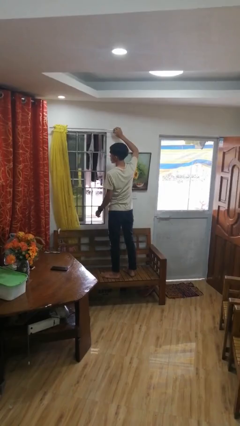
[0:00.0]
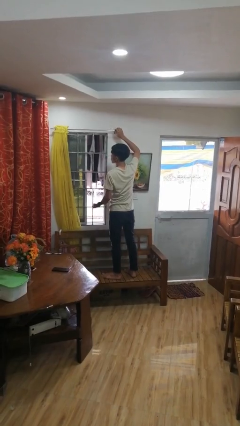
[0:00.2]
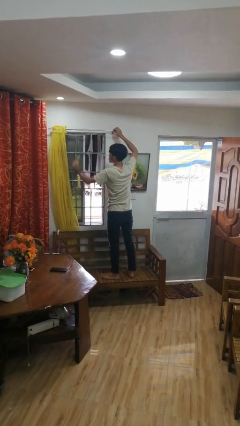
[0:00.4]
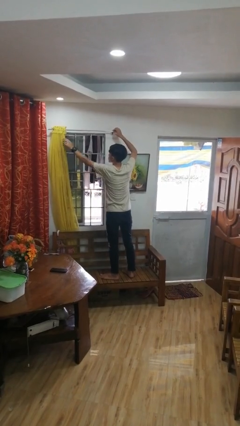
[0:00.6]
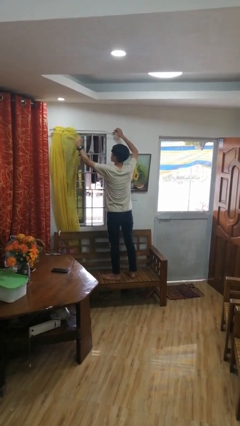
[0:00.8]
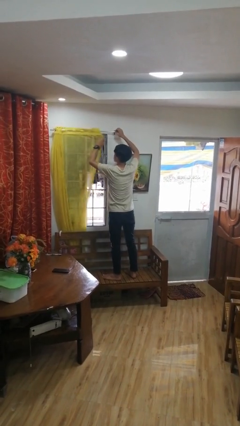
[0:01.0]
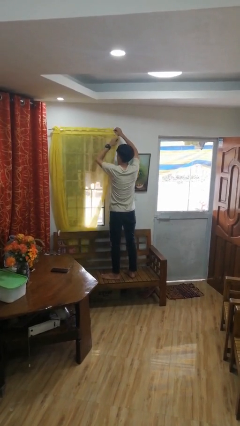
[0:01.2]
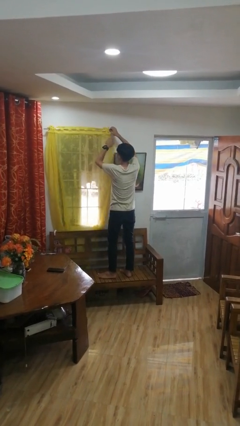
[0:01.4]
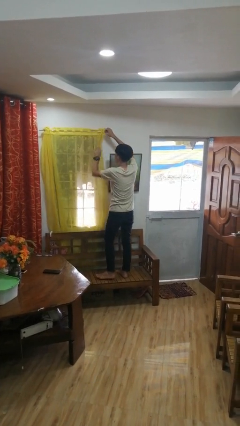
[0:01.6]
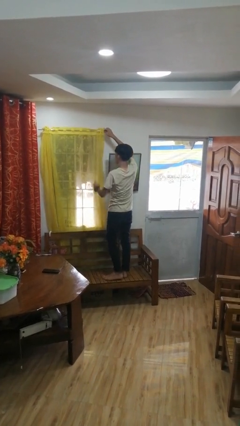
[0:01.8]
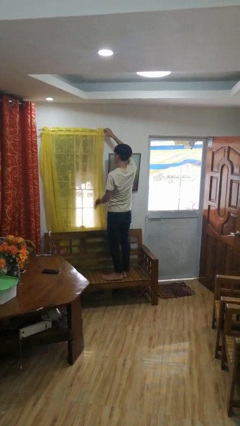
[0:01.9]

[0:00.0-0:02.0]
person closes curtains

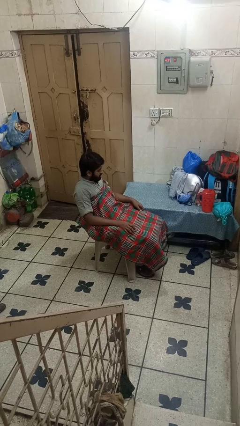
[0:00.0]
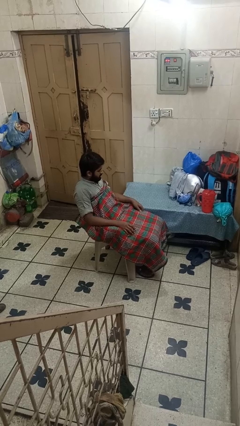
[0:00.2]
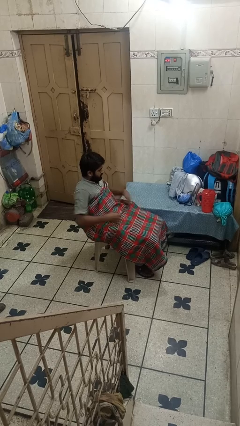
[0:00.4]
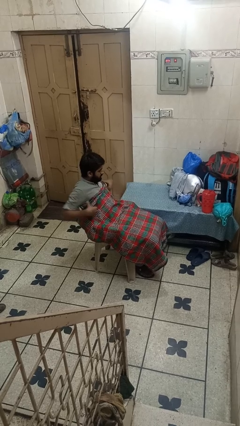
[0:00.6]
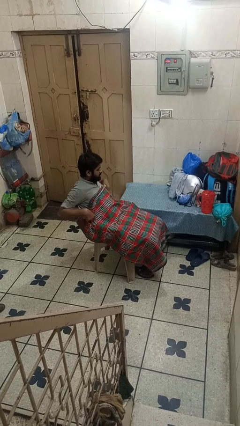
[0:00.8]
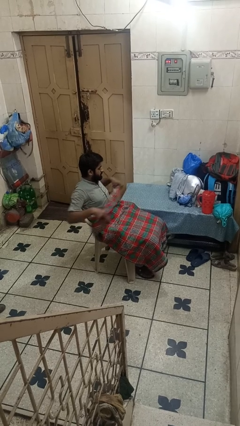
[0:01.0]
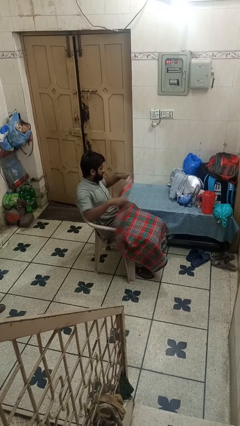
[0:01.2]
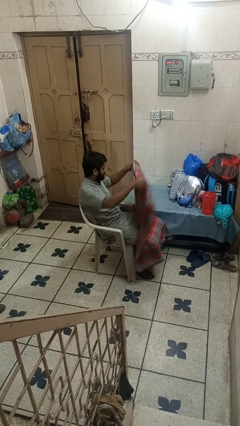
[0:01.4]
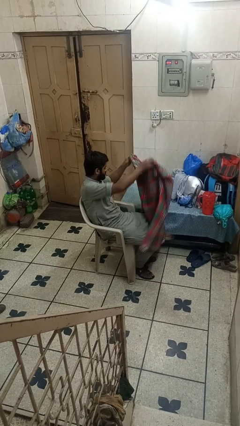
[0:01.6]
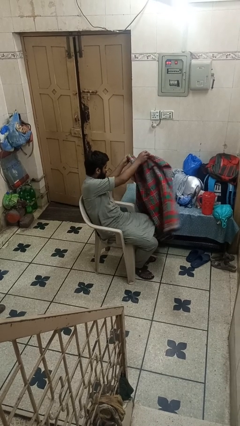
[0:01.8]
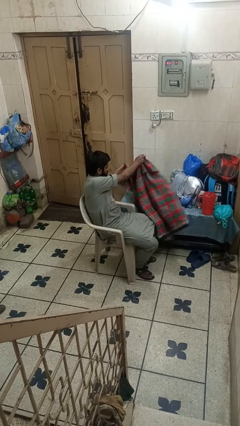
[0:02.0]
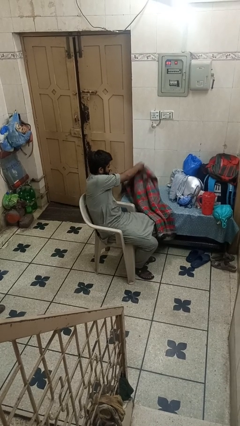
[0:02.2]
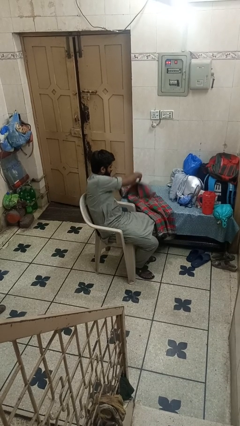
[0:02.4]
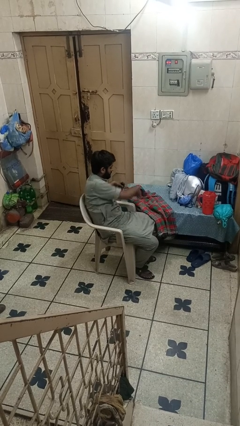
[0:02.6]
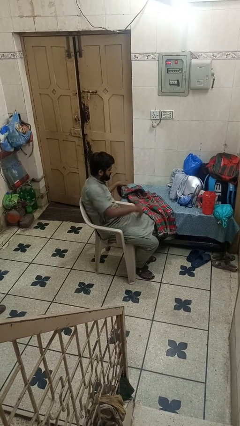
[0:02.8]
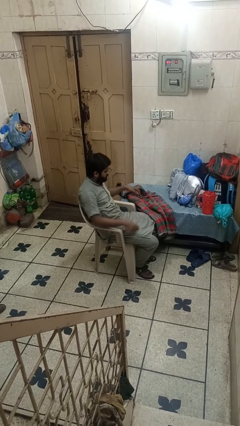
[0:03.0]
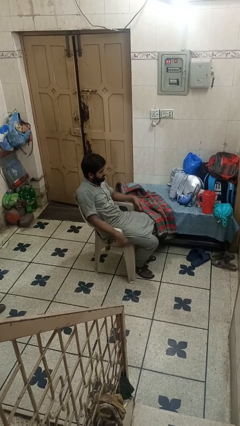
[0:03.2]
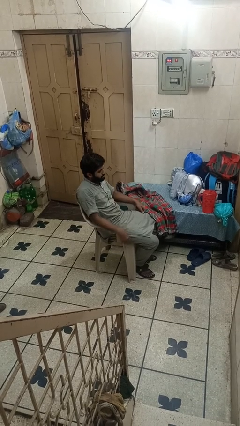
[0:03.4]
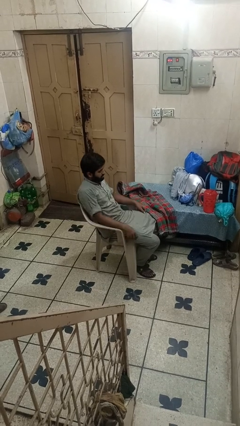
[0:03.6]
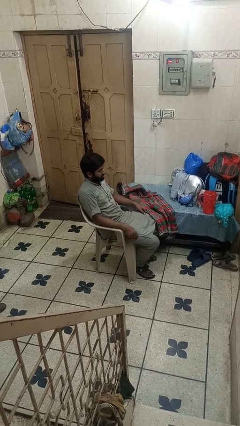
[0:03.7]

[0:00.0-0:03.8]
person uncovers with blanket

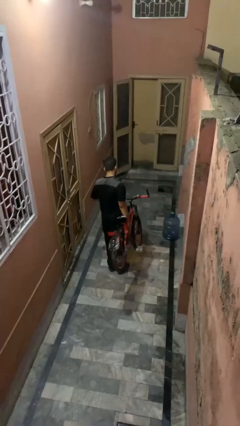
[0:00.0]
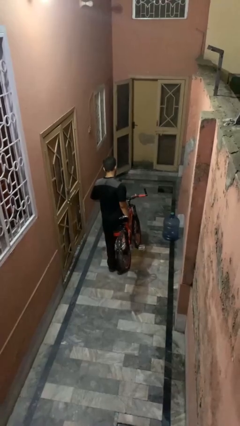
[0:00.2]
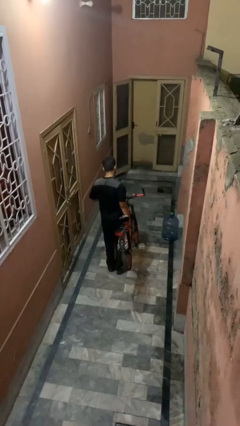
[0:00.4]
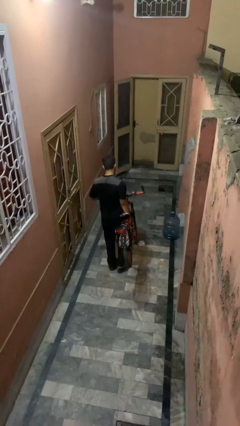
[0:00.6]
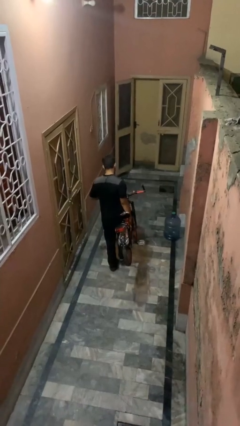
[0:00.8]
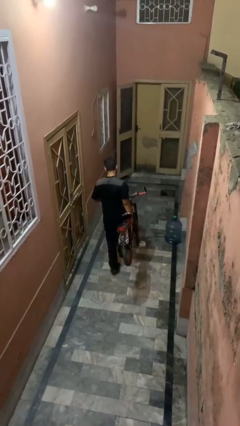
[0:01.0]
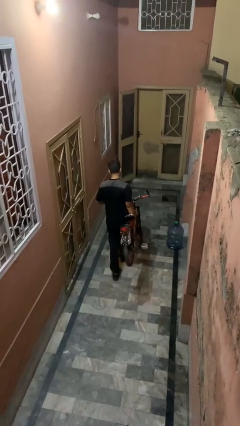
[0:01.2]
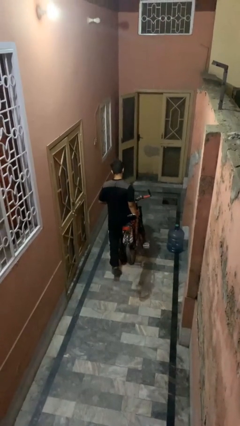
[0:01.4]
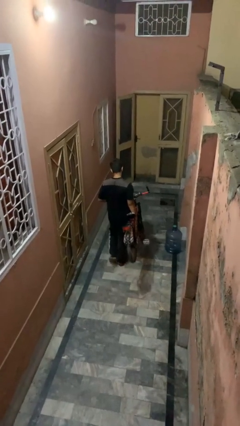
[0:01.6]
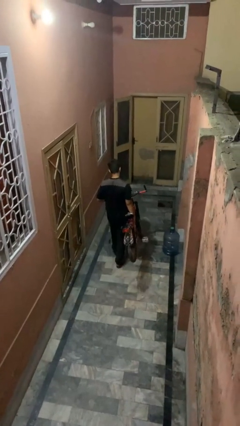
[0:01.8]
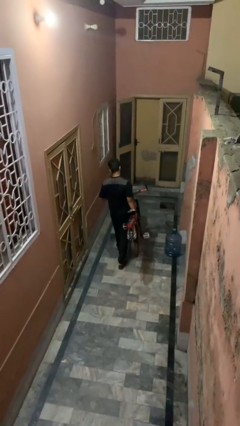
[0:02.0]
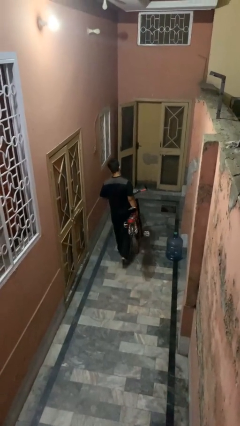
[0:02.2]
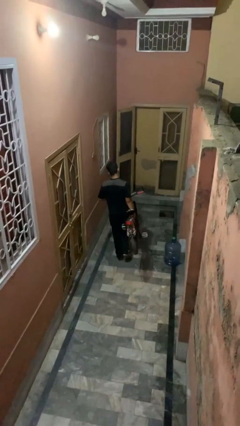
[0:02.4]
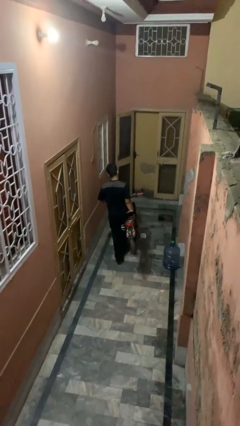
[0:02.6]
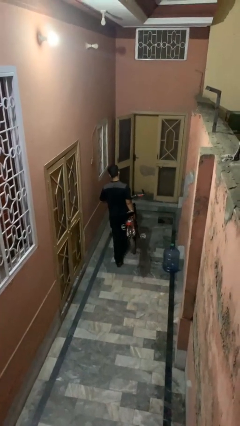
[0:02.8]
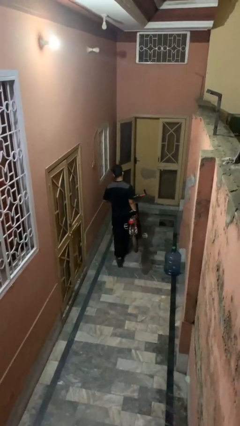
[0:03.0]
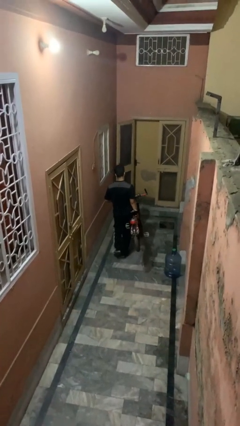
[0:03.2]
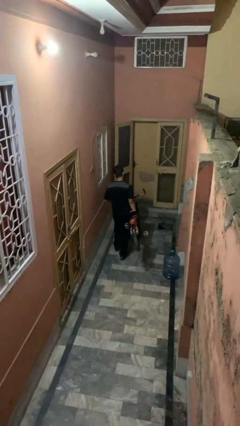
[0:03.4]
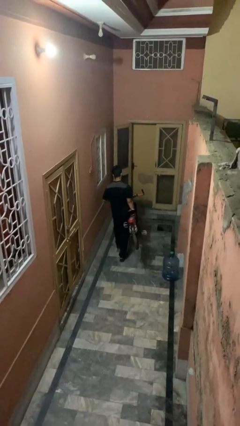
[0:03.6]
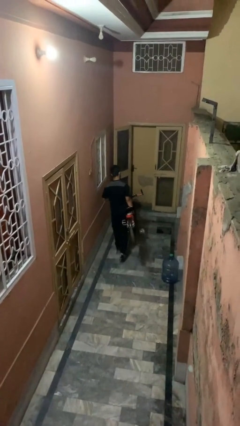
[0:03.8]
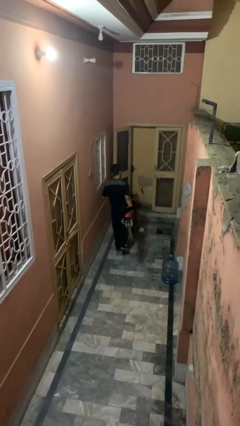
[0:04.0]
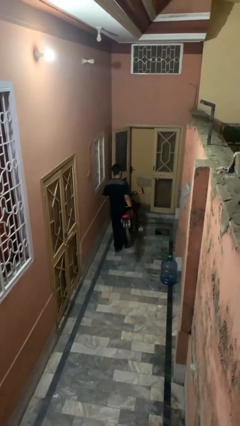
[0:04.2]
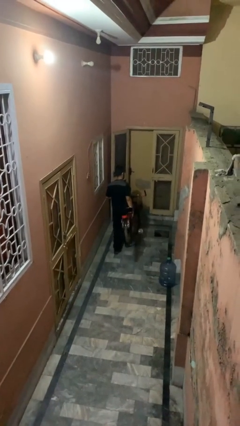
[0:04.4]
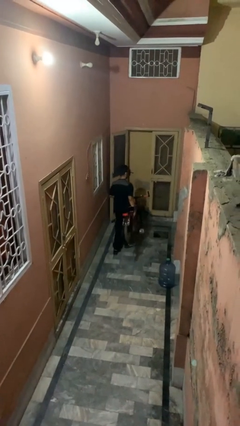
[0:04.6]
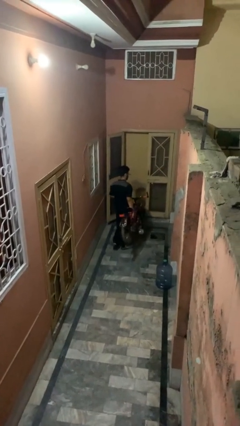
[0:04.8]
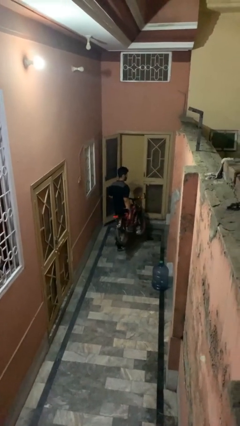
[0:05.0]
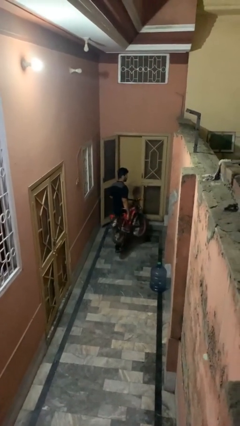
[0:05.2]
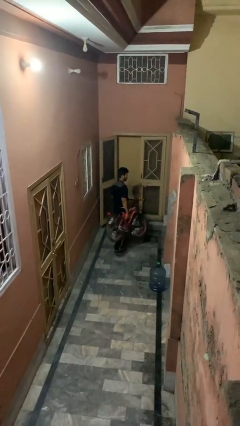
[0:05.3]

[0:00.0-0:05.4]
person carries bicycle

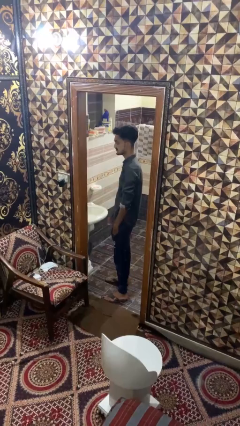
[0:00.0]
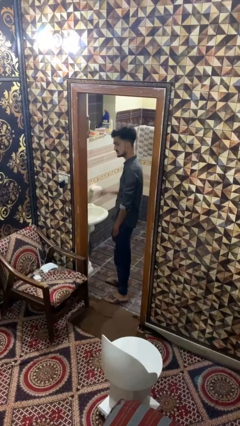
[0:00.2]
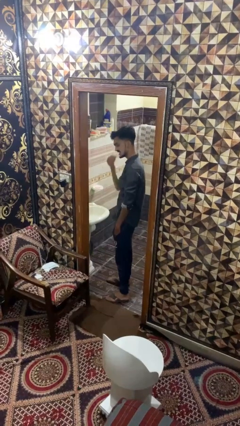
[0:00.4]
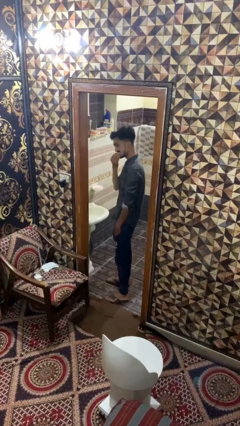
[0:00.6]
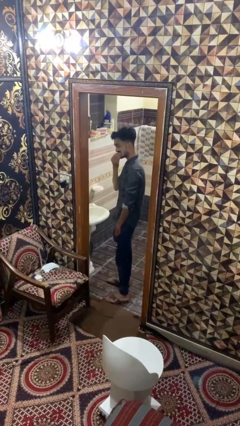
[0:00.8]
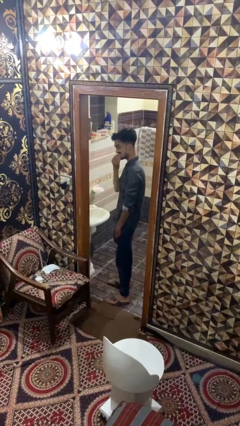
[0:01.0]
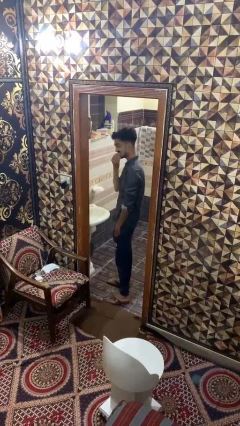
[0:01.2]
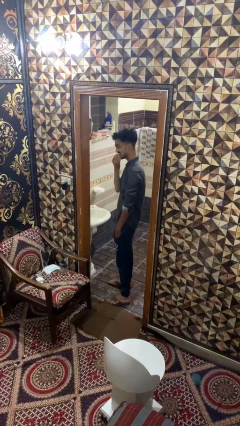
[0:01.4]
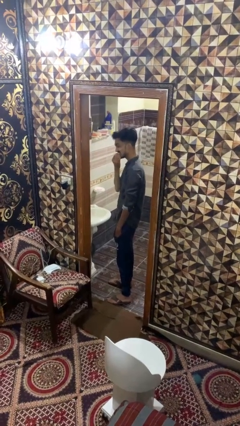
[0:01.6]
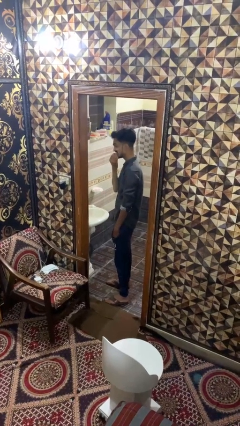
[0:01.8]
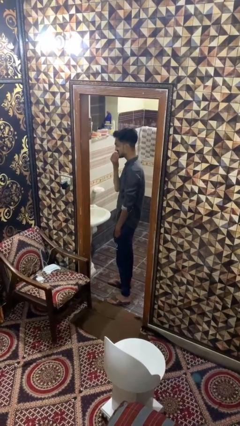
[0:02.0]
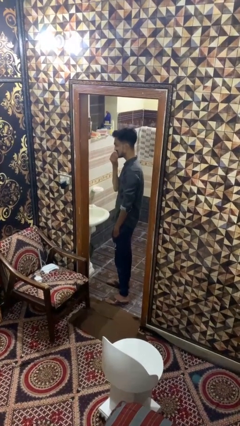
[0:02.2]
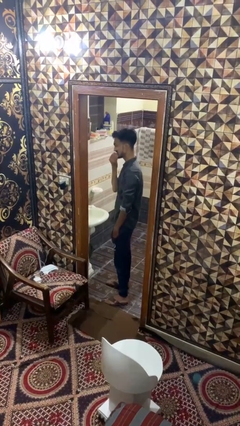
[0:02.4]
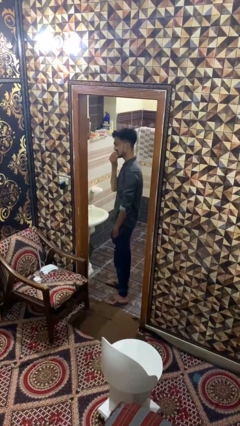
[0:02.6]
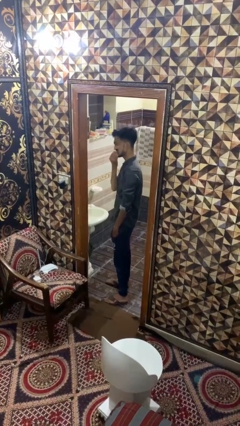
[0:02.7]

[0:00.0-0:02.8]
person flosses

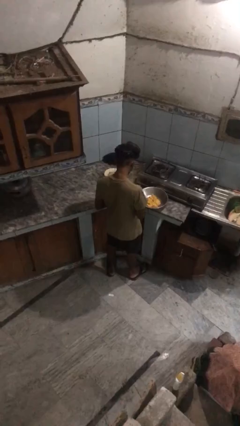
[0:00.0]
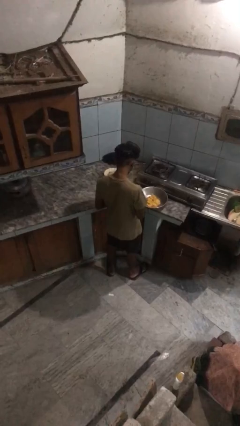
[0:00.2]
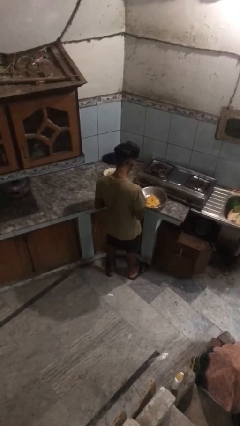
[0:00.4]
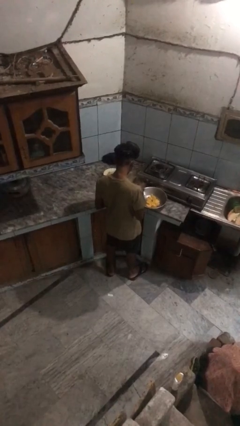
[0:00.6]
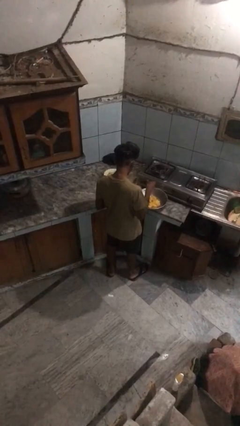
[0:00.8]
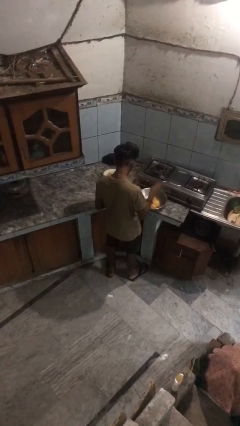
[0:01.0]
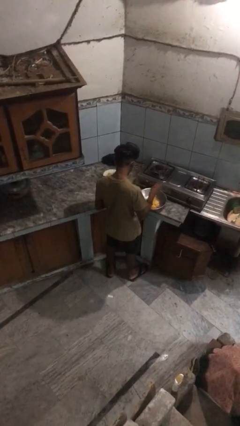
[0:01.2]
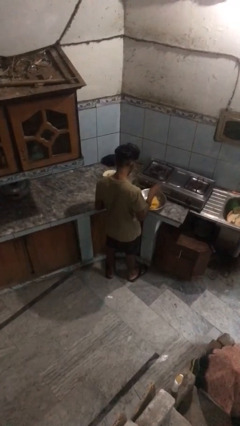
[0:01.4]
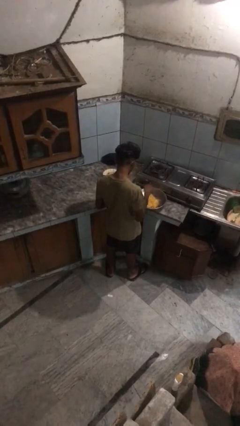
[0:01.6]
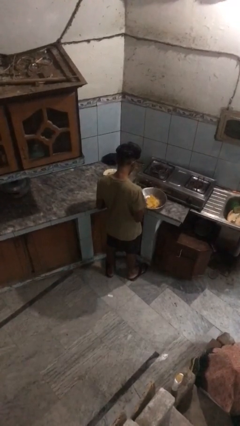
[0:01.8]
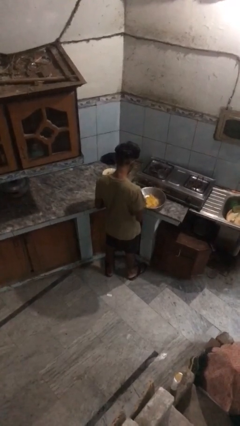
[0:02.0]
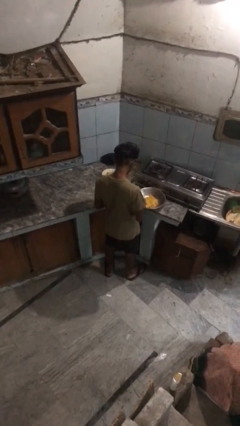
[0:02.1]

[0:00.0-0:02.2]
person pours into bowl

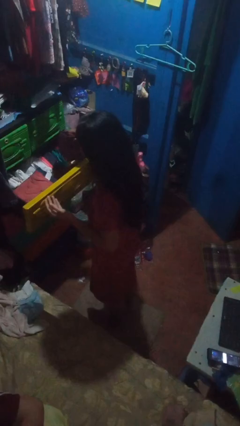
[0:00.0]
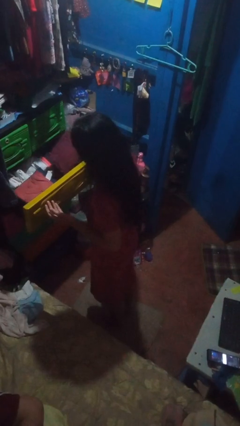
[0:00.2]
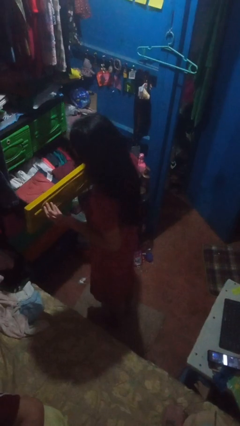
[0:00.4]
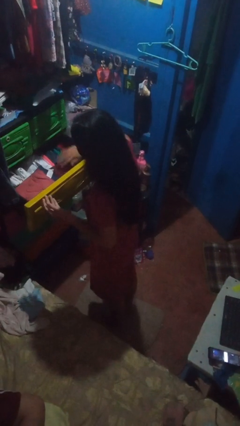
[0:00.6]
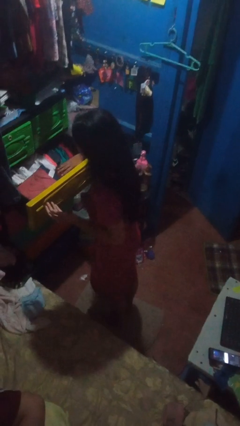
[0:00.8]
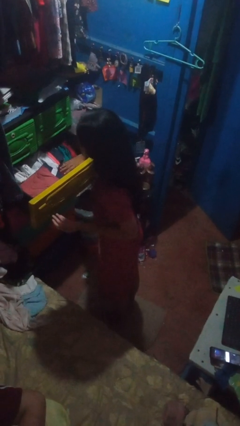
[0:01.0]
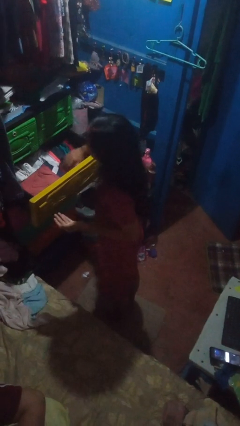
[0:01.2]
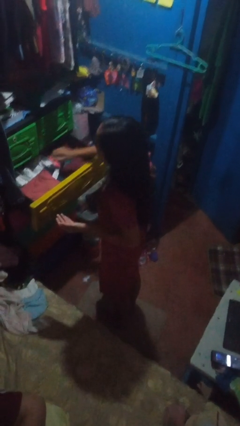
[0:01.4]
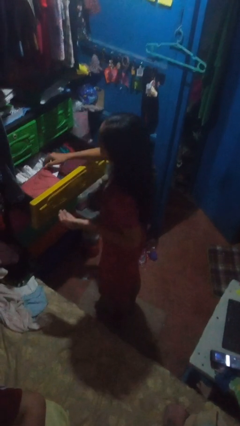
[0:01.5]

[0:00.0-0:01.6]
person puts clothes into dresser
